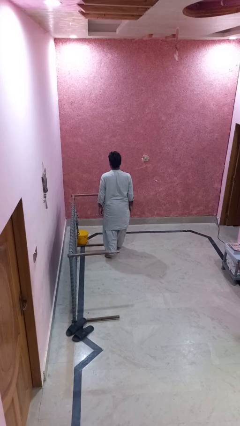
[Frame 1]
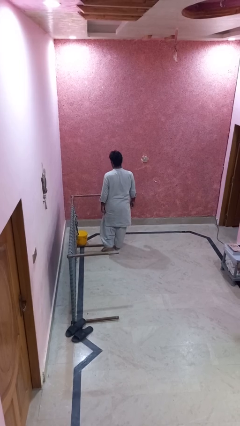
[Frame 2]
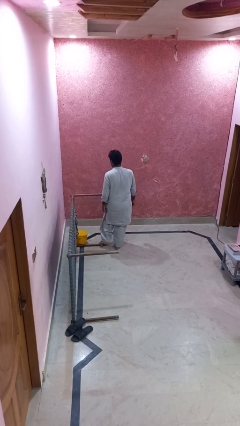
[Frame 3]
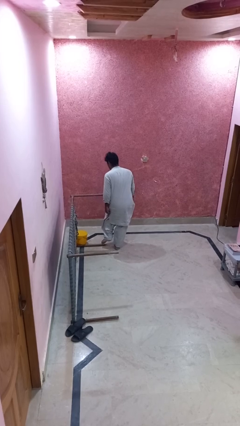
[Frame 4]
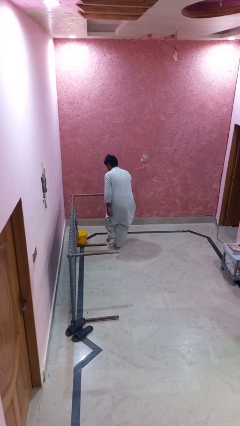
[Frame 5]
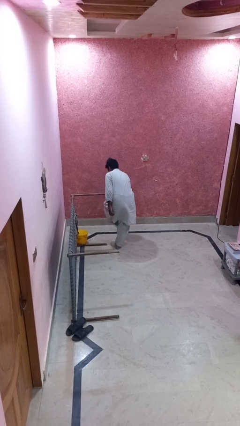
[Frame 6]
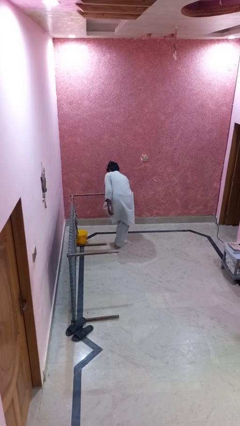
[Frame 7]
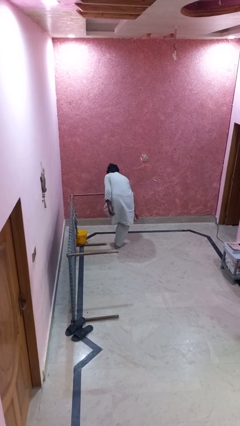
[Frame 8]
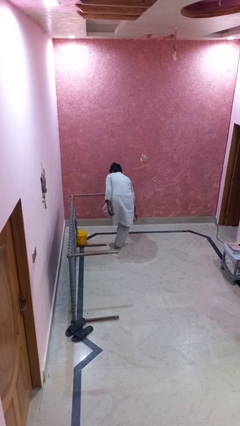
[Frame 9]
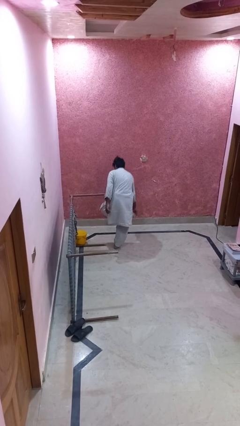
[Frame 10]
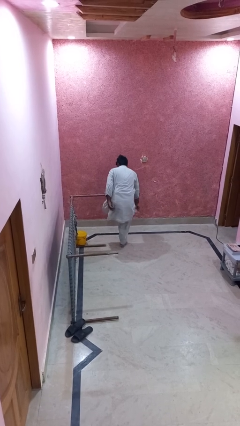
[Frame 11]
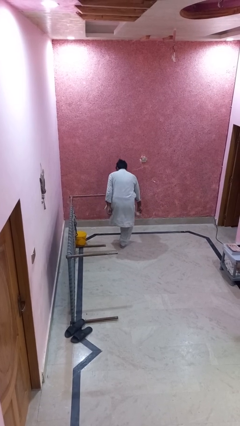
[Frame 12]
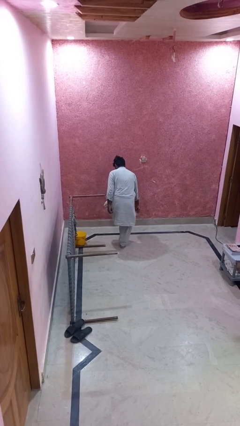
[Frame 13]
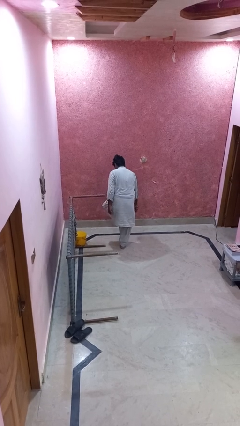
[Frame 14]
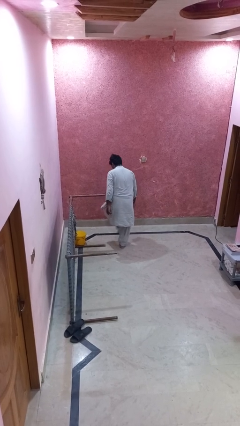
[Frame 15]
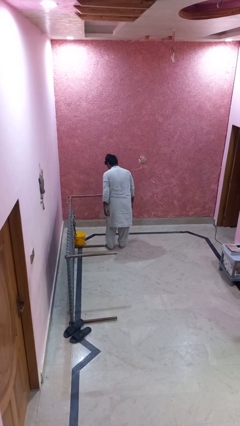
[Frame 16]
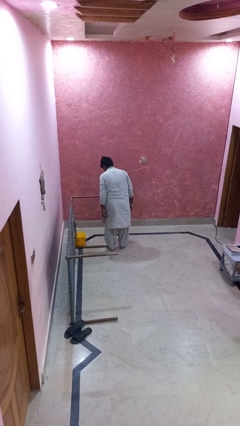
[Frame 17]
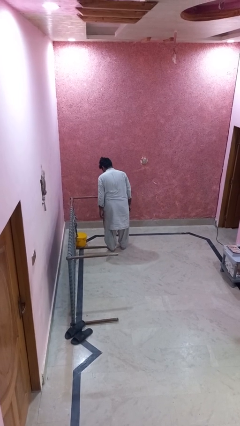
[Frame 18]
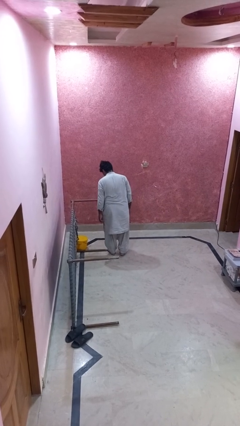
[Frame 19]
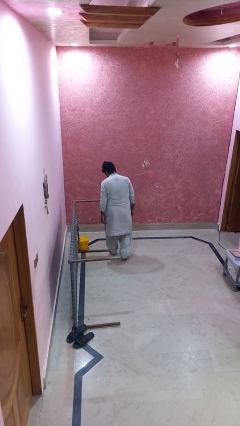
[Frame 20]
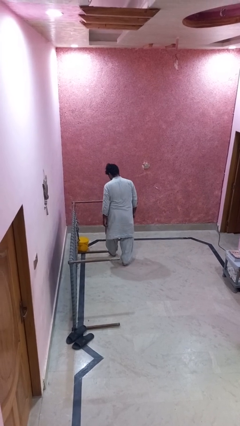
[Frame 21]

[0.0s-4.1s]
person stubs toe

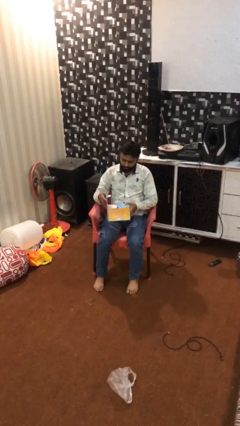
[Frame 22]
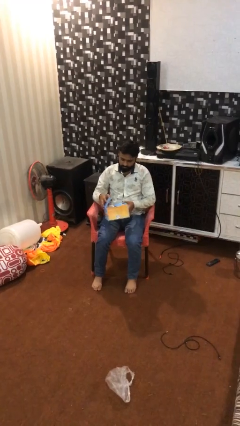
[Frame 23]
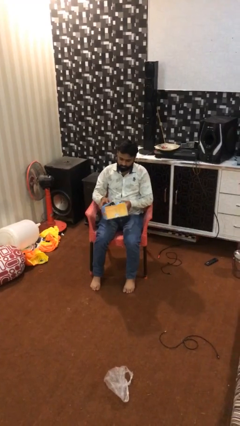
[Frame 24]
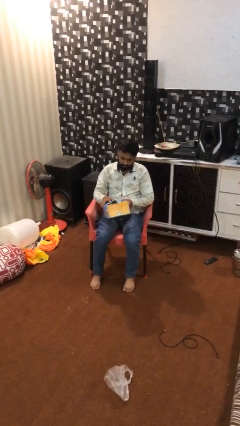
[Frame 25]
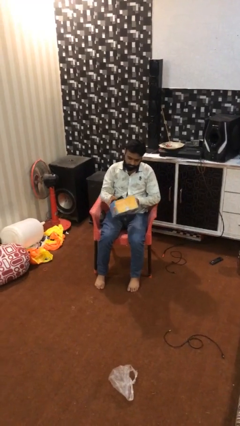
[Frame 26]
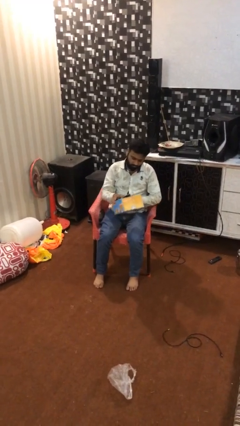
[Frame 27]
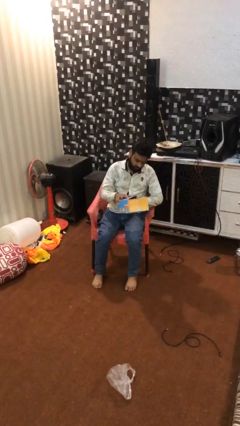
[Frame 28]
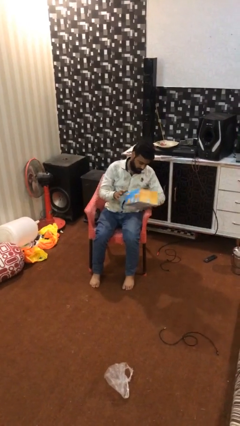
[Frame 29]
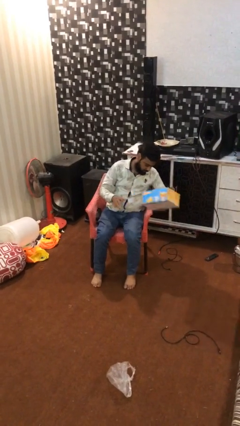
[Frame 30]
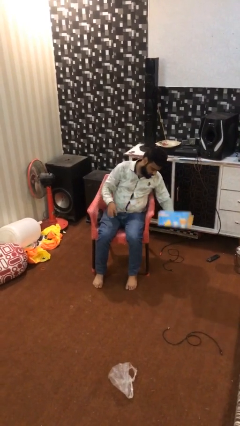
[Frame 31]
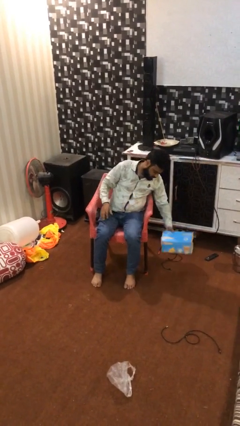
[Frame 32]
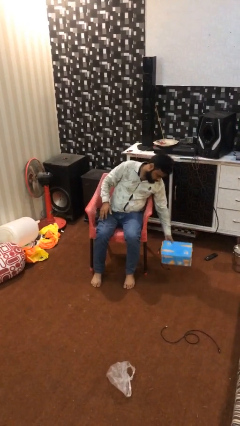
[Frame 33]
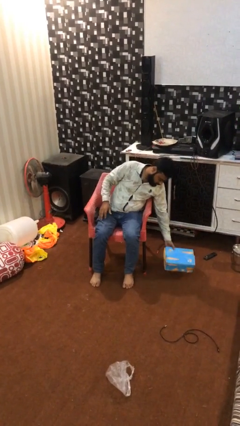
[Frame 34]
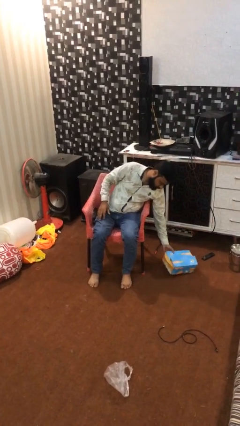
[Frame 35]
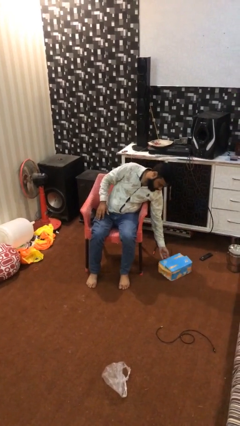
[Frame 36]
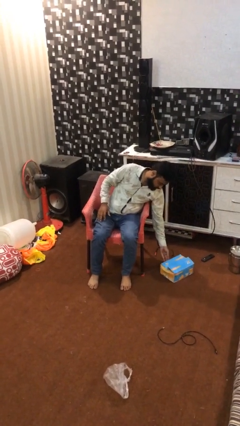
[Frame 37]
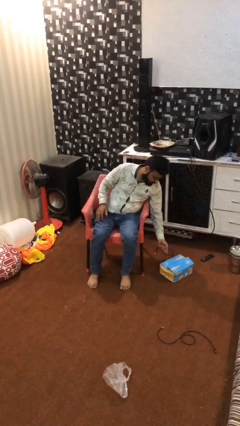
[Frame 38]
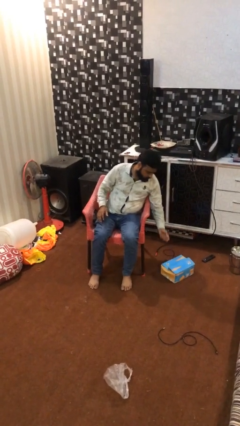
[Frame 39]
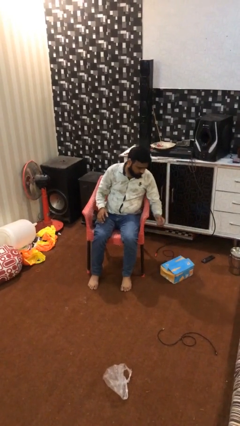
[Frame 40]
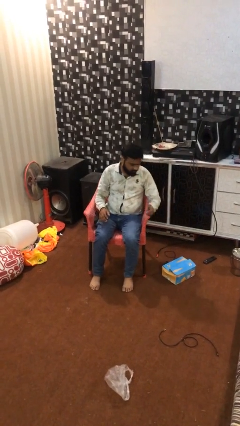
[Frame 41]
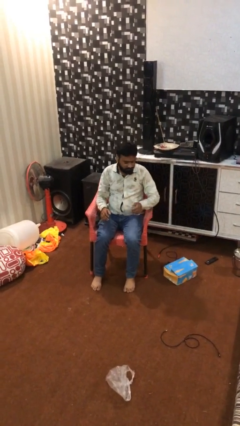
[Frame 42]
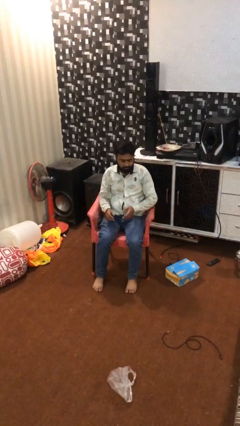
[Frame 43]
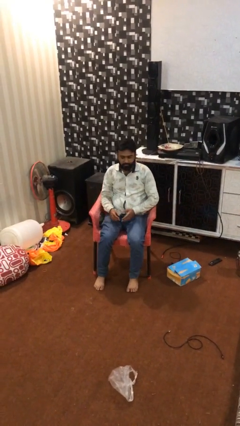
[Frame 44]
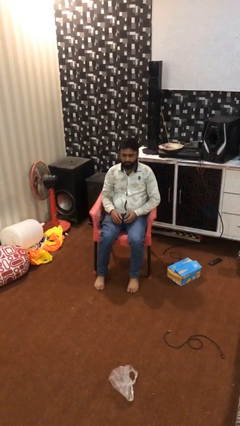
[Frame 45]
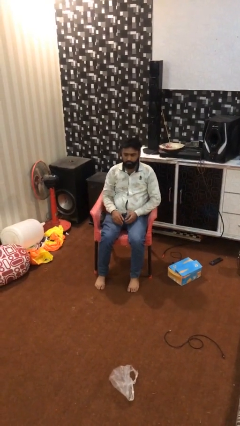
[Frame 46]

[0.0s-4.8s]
person puts down object on floor

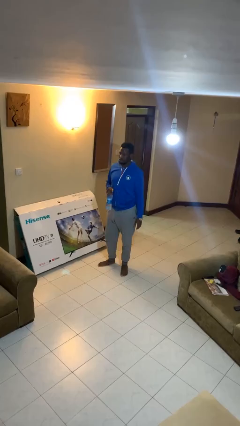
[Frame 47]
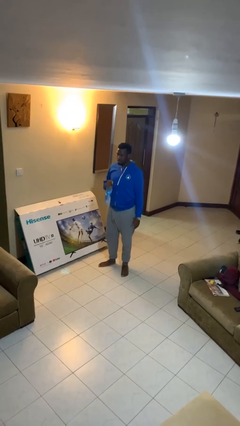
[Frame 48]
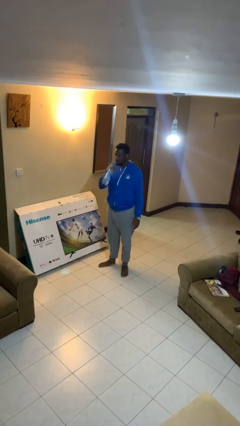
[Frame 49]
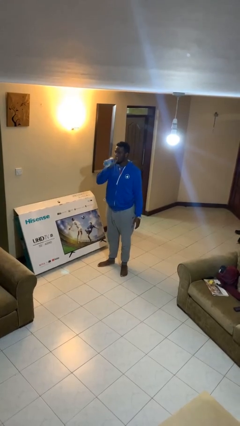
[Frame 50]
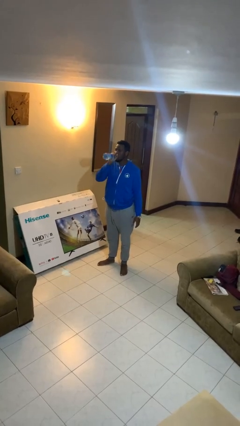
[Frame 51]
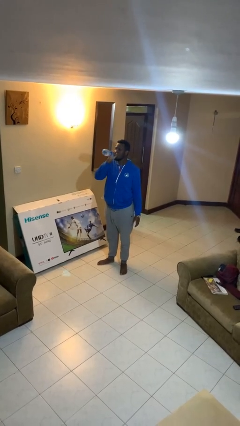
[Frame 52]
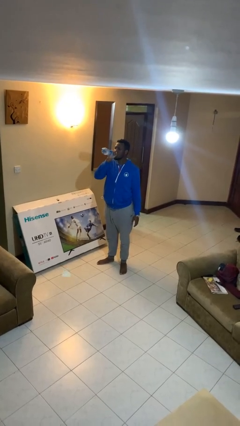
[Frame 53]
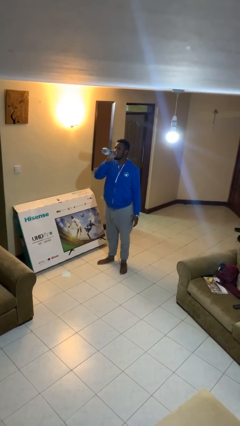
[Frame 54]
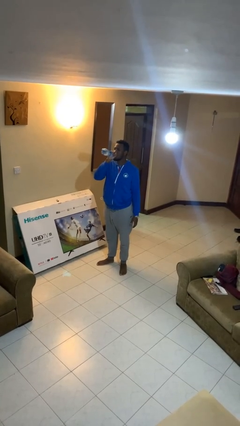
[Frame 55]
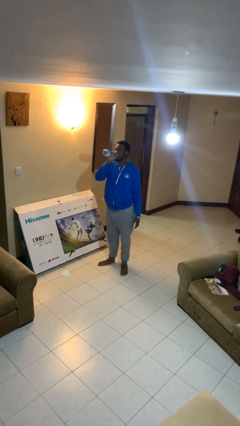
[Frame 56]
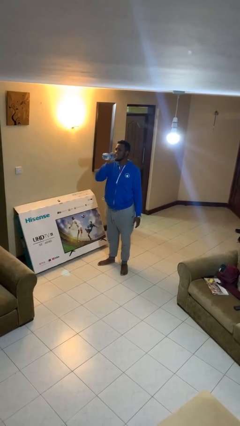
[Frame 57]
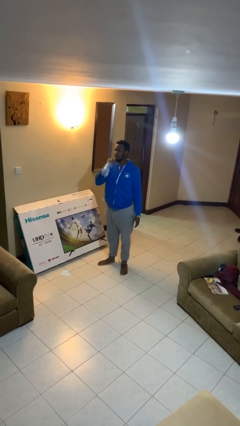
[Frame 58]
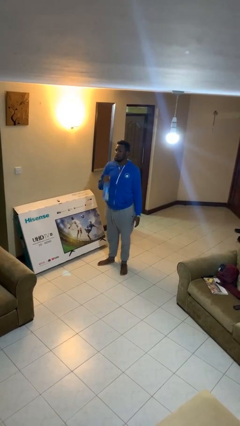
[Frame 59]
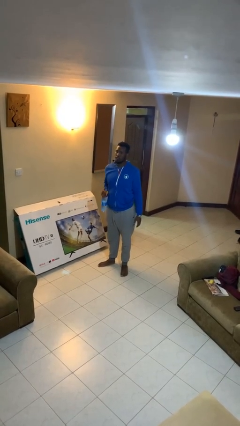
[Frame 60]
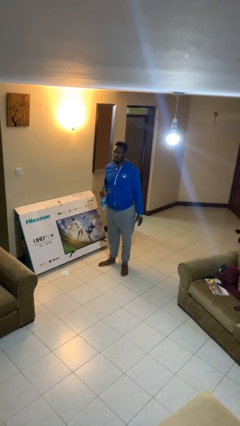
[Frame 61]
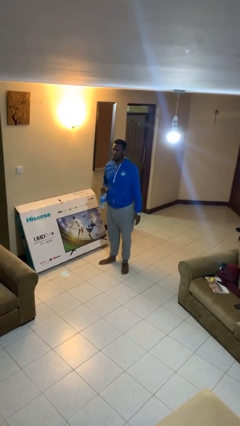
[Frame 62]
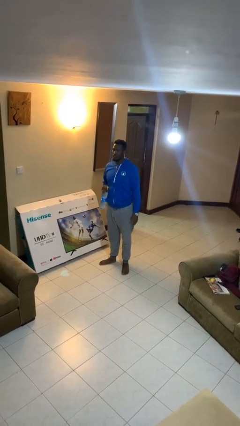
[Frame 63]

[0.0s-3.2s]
person drinks from bottle

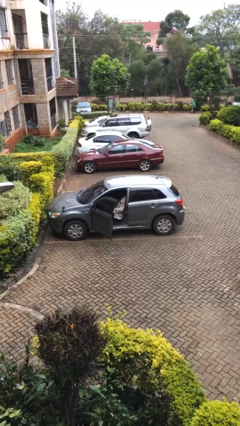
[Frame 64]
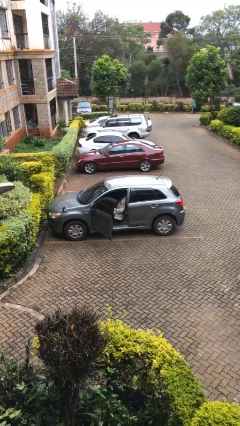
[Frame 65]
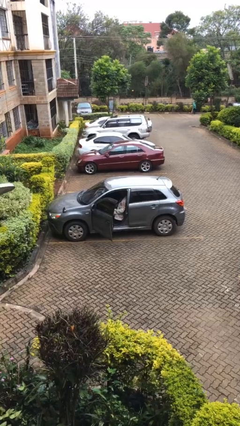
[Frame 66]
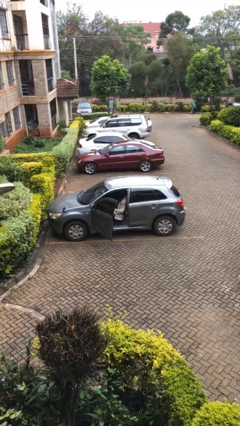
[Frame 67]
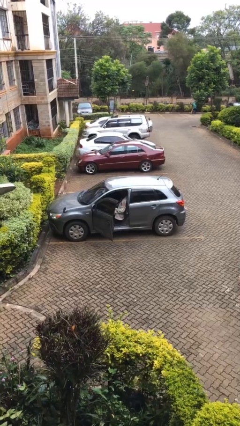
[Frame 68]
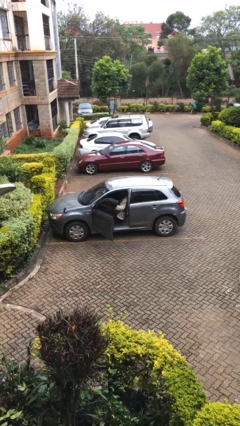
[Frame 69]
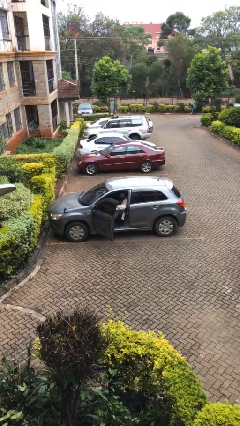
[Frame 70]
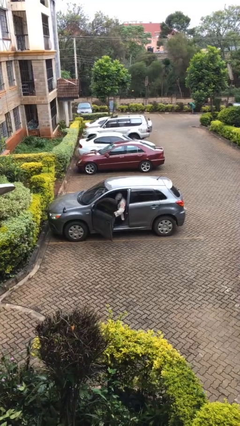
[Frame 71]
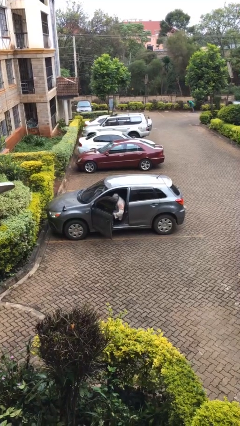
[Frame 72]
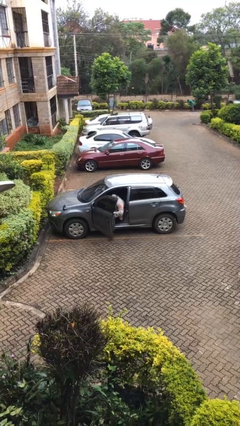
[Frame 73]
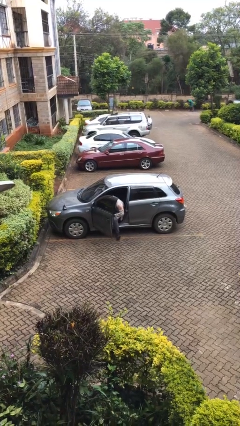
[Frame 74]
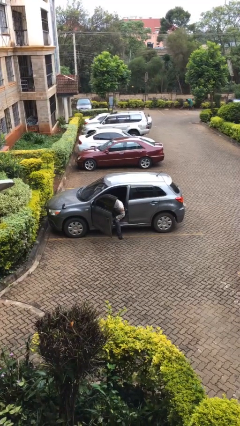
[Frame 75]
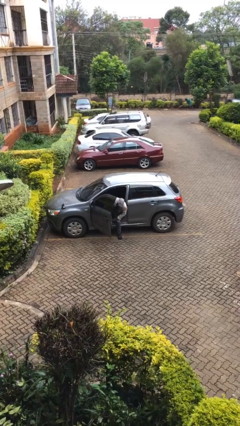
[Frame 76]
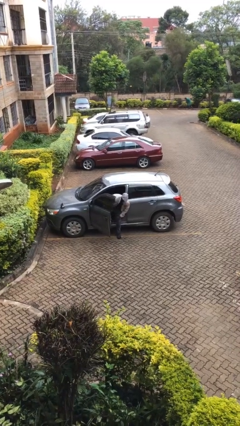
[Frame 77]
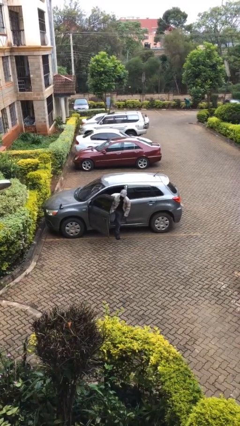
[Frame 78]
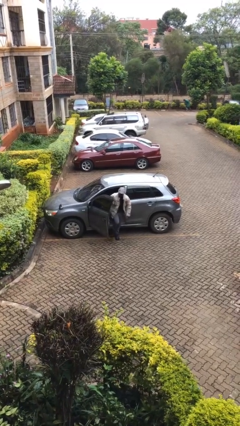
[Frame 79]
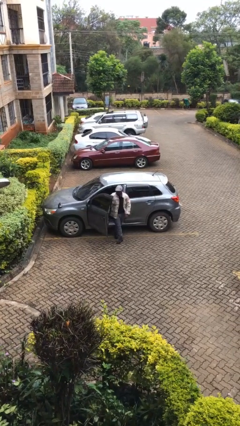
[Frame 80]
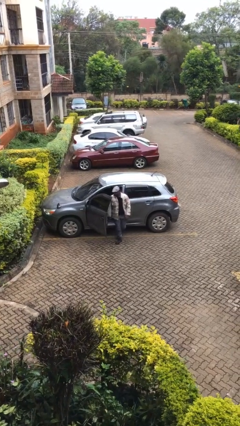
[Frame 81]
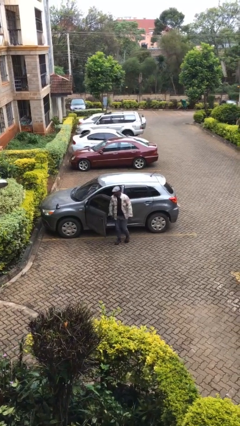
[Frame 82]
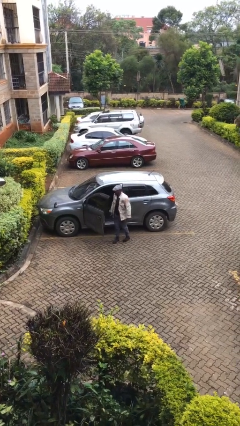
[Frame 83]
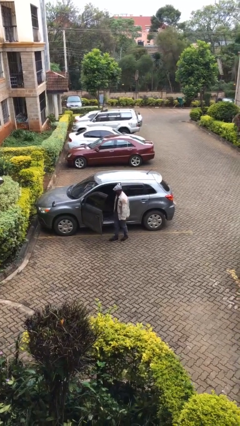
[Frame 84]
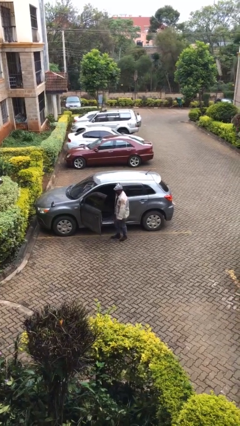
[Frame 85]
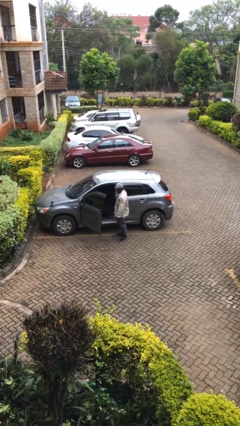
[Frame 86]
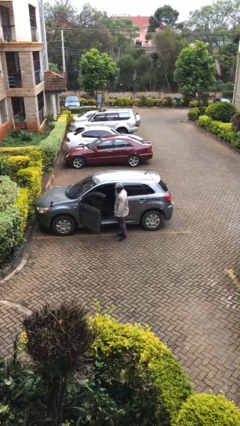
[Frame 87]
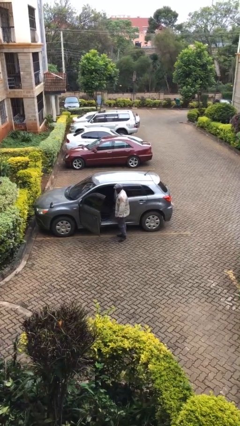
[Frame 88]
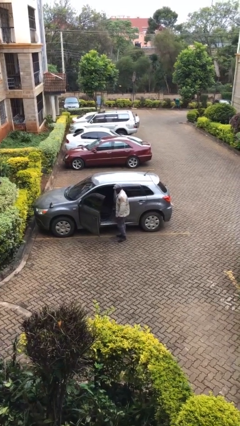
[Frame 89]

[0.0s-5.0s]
person exits car

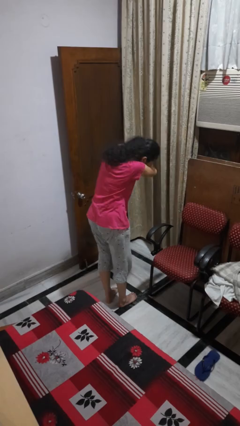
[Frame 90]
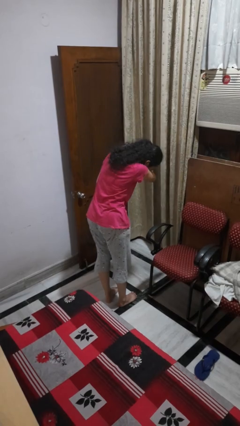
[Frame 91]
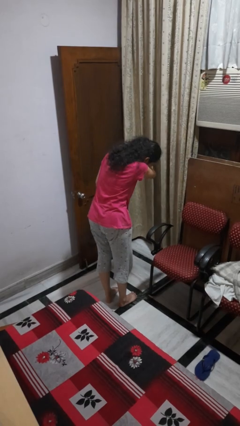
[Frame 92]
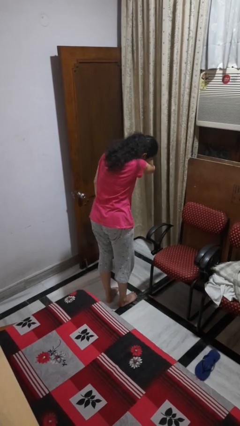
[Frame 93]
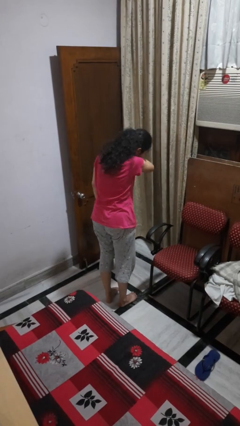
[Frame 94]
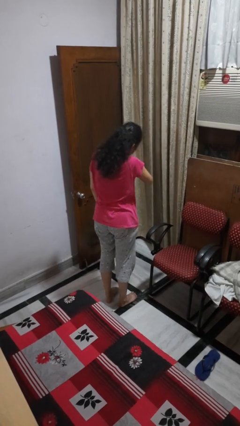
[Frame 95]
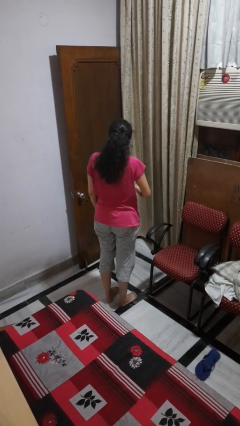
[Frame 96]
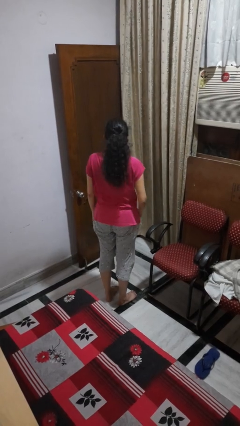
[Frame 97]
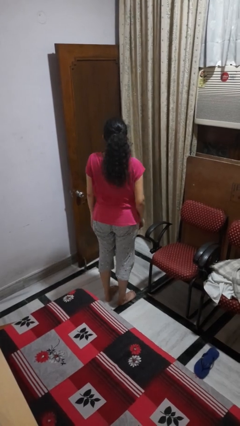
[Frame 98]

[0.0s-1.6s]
person sneezes into arm
